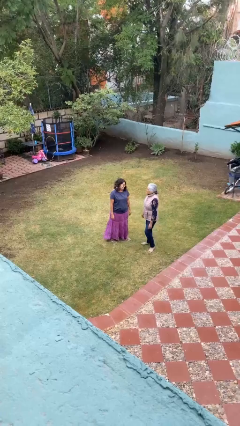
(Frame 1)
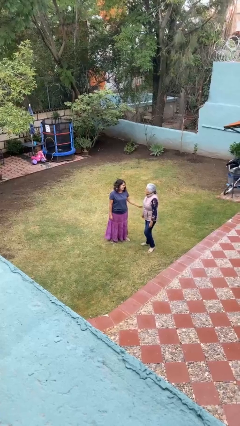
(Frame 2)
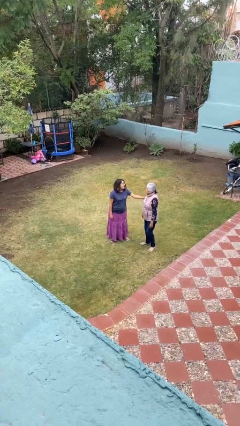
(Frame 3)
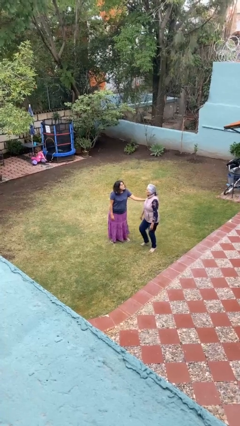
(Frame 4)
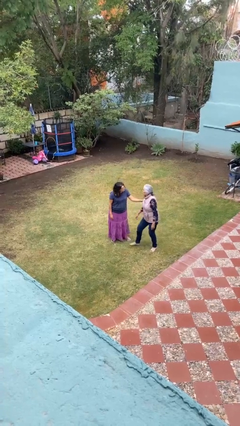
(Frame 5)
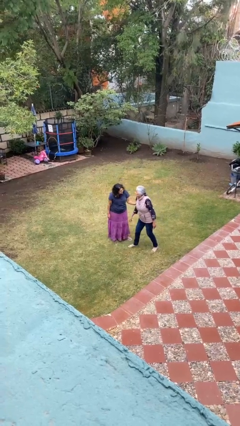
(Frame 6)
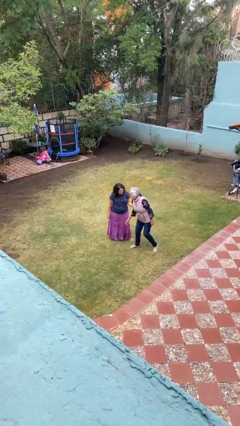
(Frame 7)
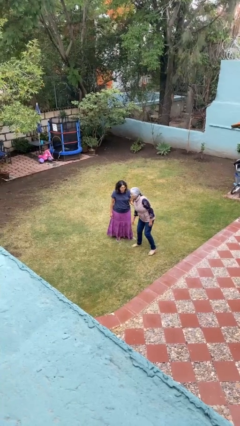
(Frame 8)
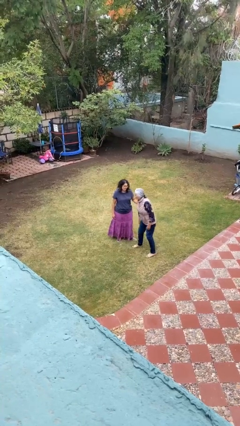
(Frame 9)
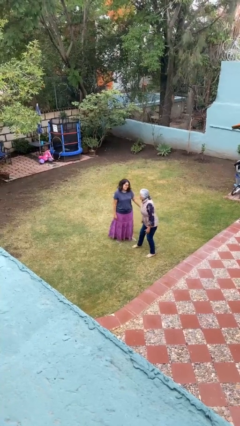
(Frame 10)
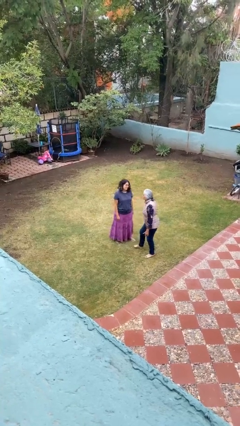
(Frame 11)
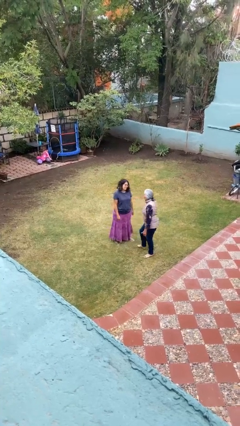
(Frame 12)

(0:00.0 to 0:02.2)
person grabs person by bicep

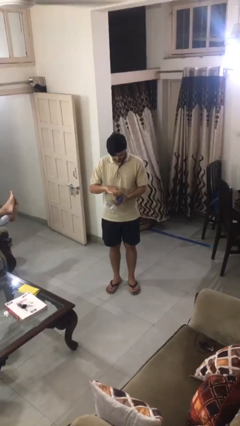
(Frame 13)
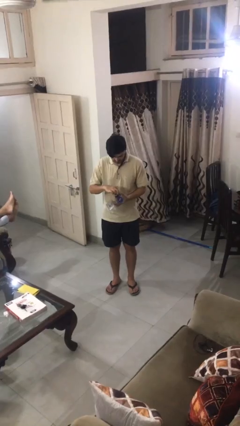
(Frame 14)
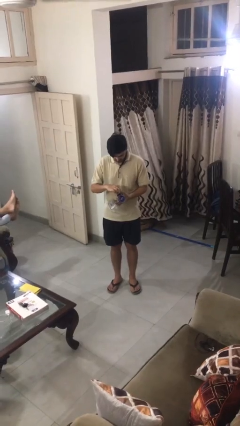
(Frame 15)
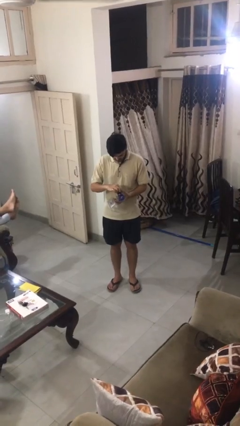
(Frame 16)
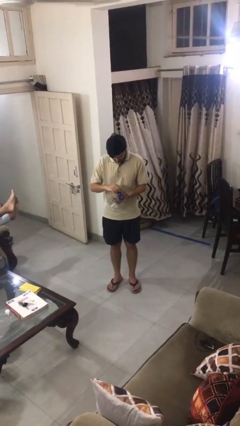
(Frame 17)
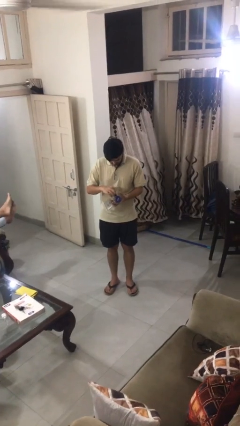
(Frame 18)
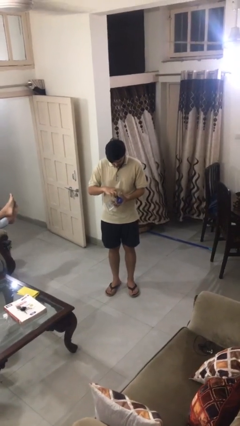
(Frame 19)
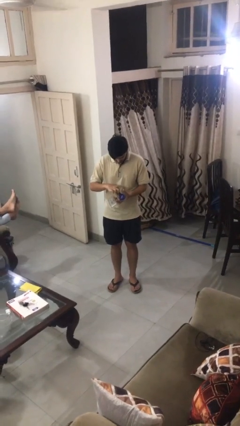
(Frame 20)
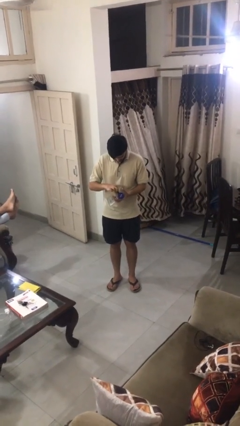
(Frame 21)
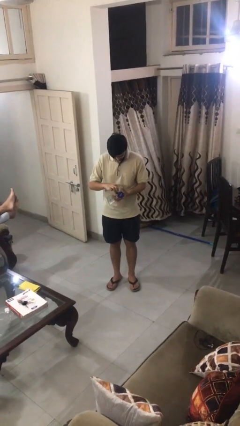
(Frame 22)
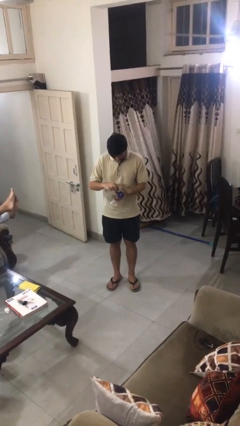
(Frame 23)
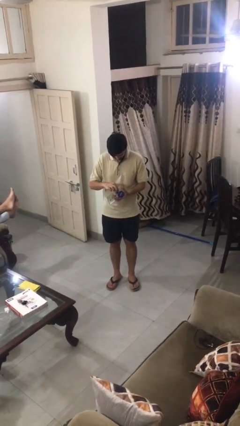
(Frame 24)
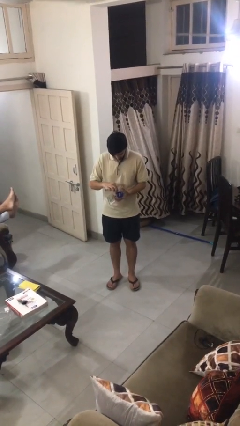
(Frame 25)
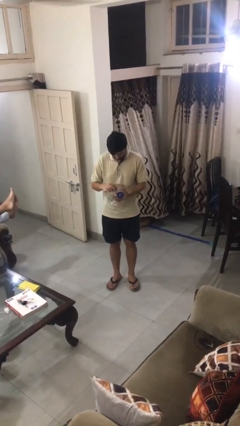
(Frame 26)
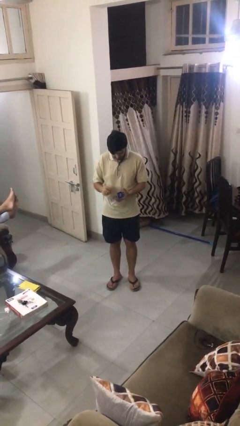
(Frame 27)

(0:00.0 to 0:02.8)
person searches jewelry box

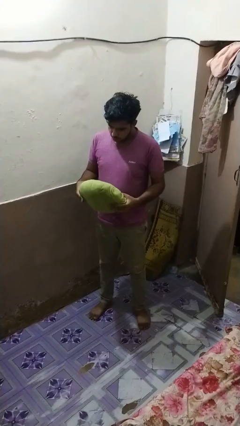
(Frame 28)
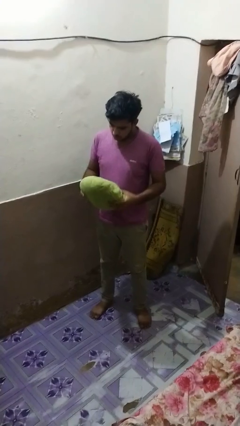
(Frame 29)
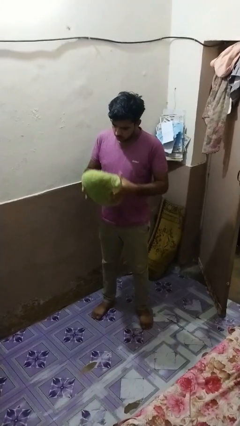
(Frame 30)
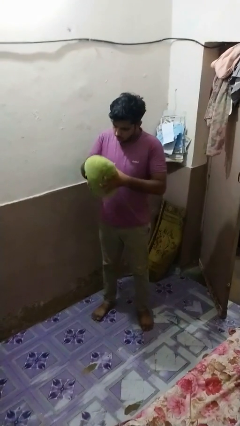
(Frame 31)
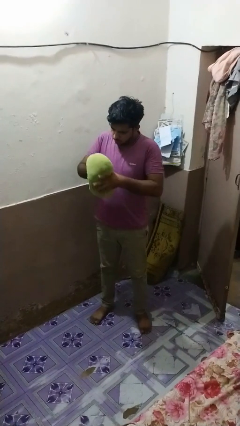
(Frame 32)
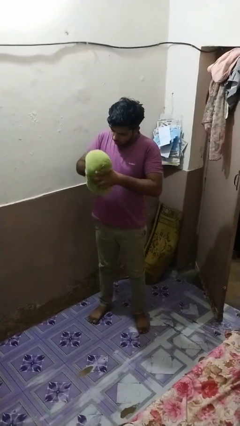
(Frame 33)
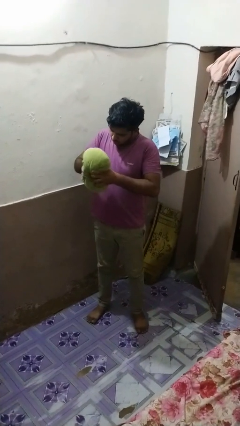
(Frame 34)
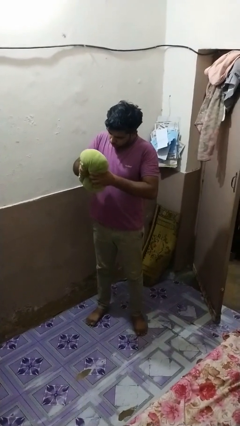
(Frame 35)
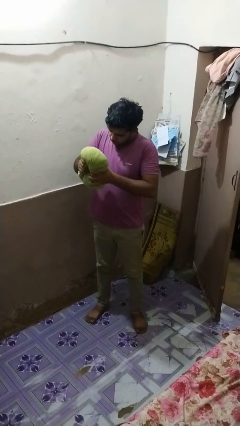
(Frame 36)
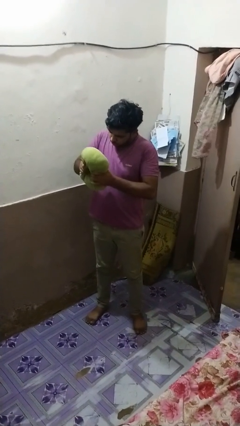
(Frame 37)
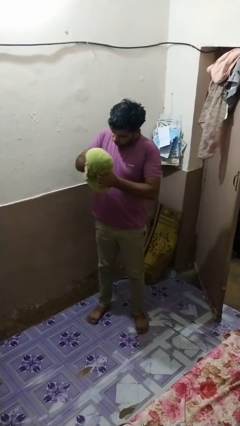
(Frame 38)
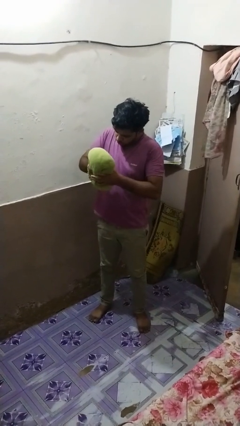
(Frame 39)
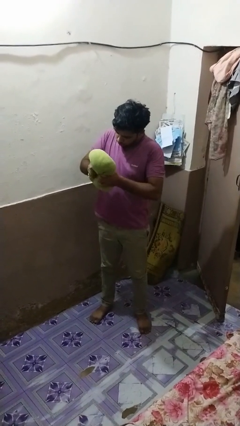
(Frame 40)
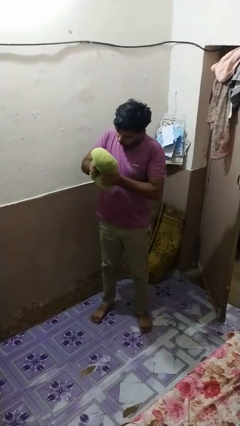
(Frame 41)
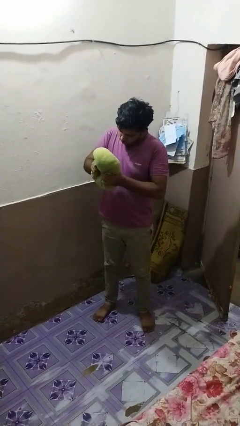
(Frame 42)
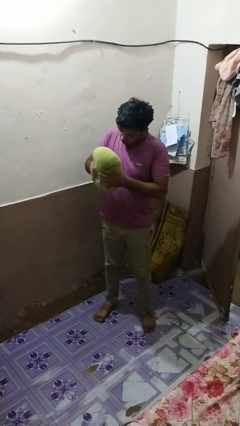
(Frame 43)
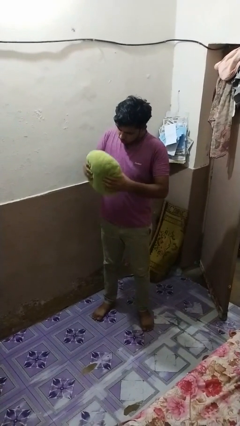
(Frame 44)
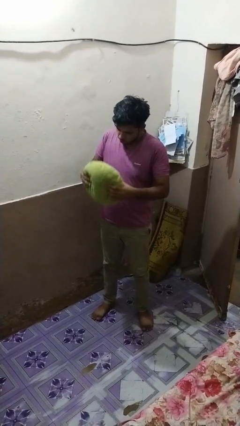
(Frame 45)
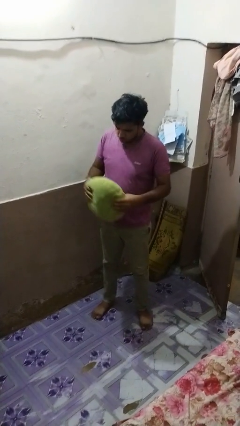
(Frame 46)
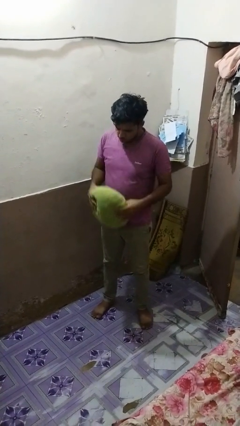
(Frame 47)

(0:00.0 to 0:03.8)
person squeezes object

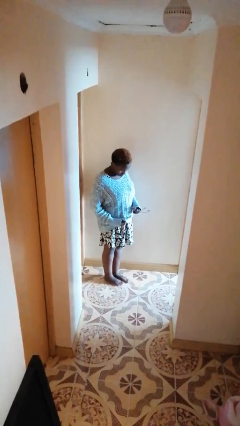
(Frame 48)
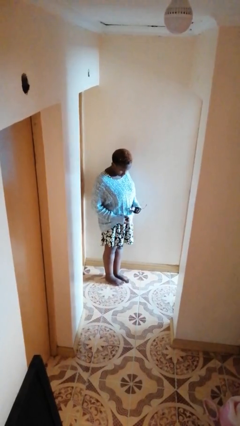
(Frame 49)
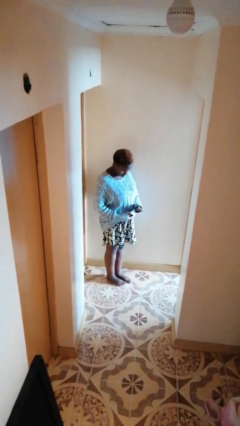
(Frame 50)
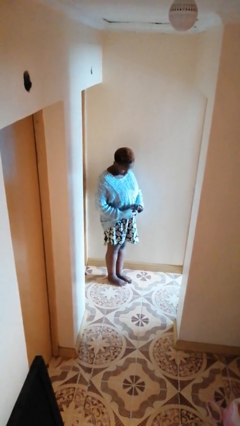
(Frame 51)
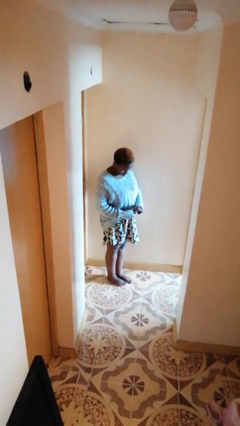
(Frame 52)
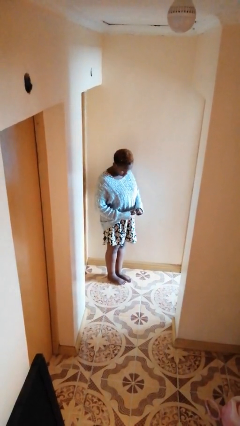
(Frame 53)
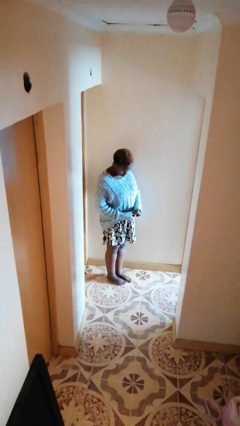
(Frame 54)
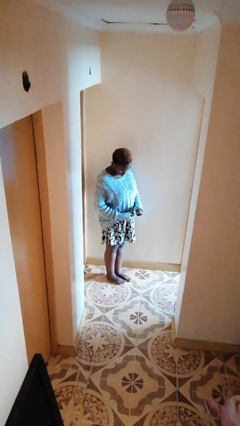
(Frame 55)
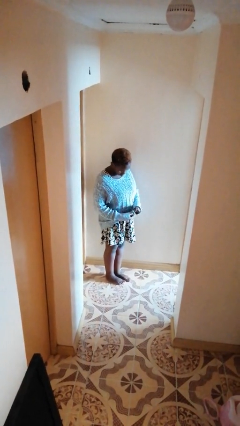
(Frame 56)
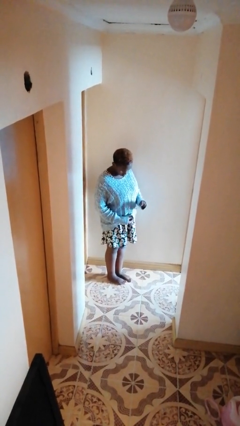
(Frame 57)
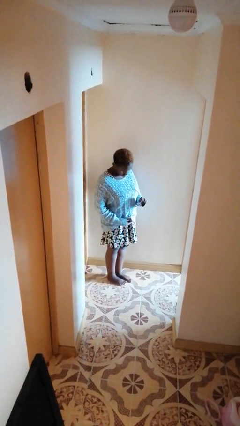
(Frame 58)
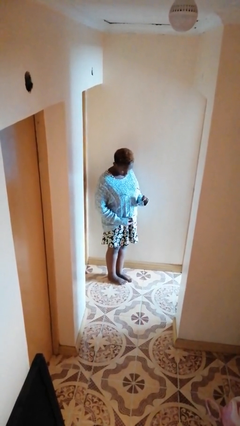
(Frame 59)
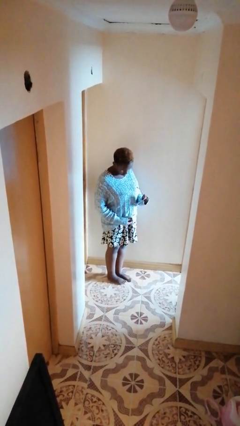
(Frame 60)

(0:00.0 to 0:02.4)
person cleans eyeglasses

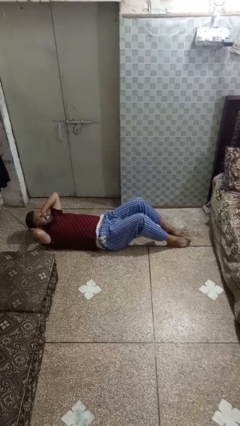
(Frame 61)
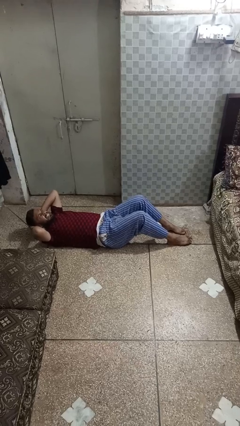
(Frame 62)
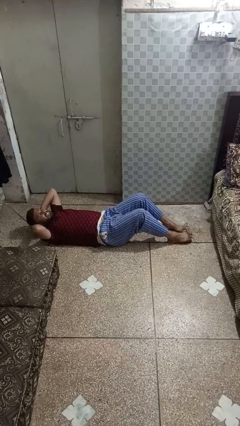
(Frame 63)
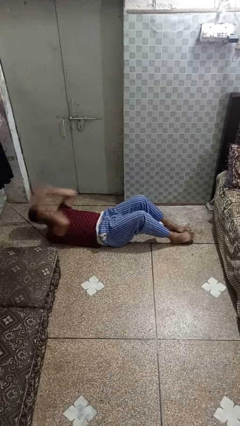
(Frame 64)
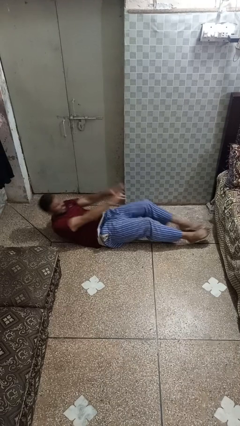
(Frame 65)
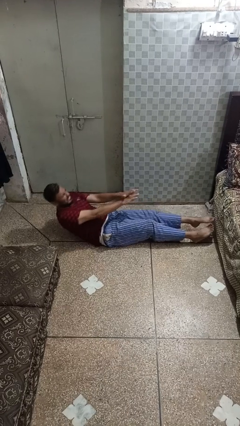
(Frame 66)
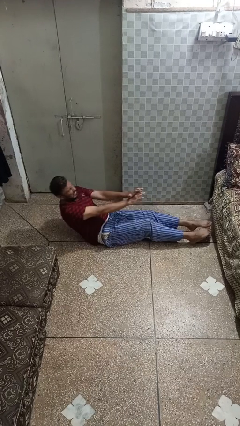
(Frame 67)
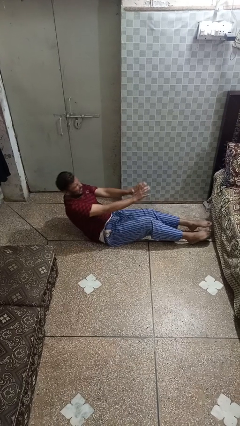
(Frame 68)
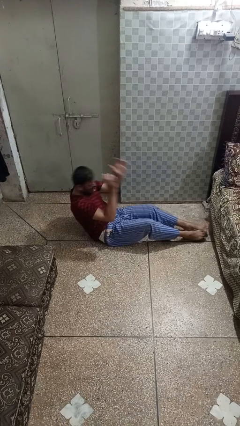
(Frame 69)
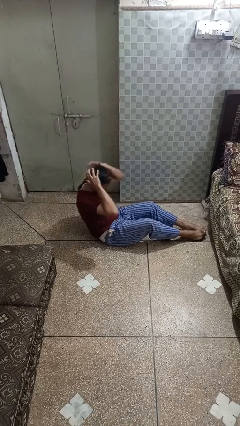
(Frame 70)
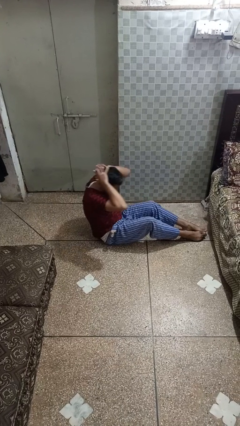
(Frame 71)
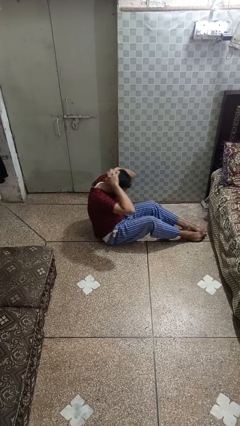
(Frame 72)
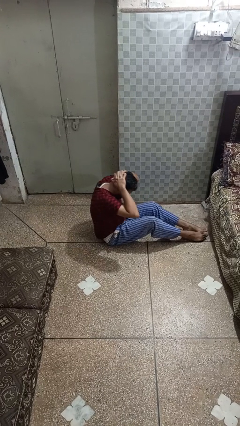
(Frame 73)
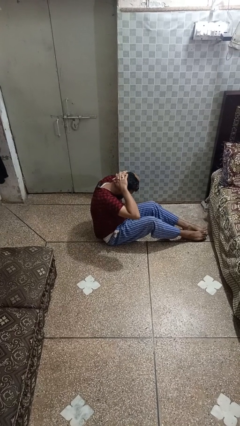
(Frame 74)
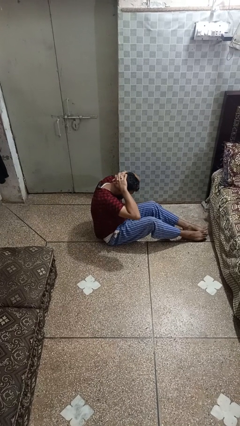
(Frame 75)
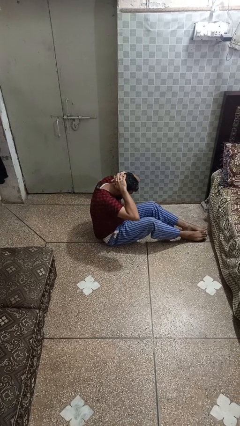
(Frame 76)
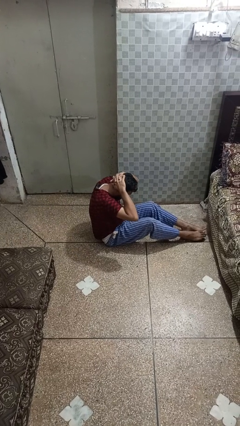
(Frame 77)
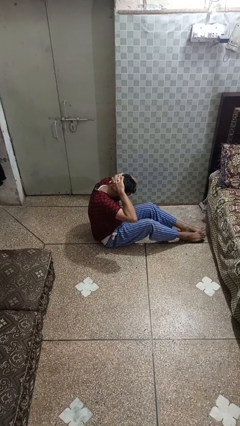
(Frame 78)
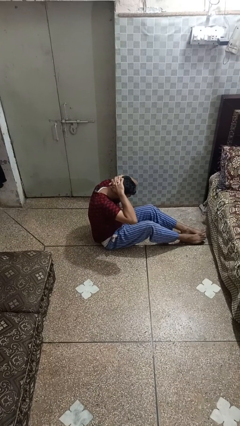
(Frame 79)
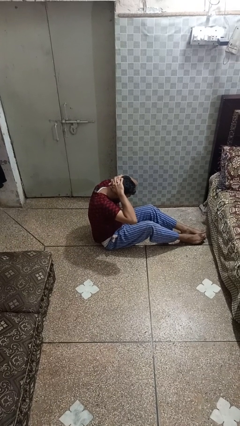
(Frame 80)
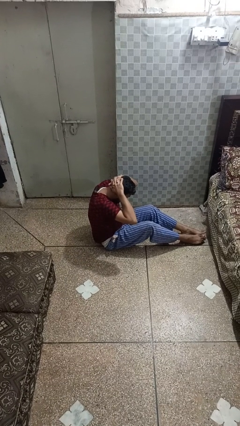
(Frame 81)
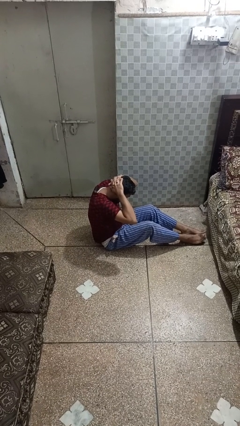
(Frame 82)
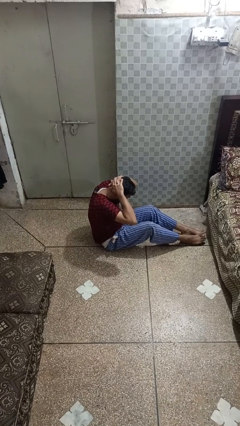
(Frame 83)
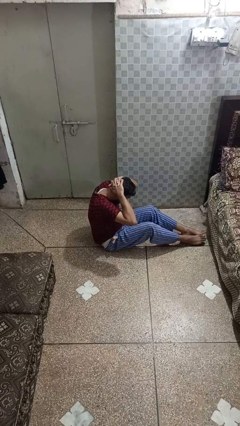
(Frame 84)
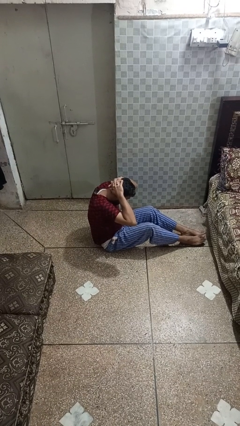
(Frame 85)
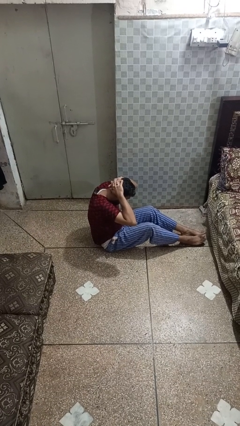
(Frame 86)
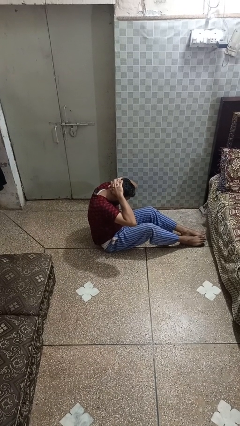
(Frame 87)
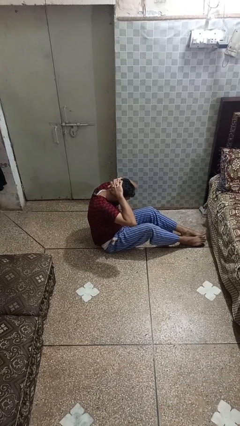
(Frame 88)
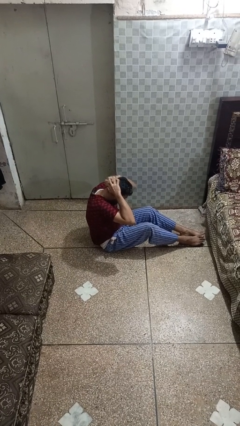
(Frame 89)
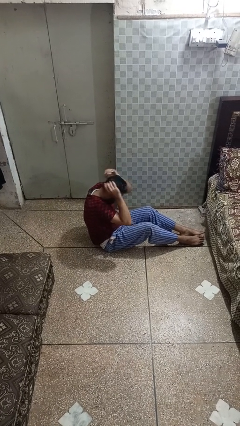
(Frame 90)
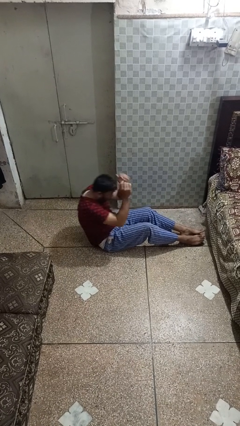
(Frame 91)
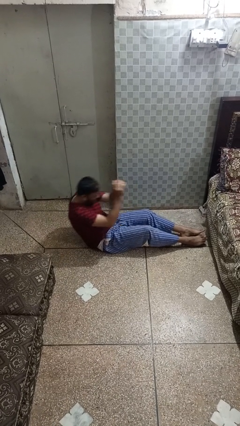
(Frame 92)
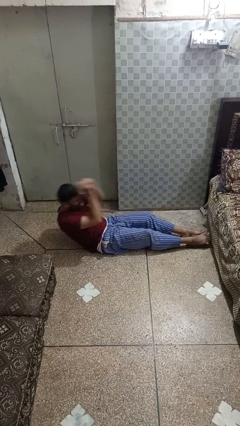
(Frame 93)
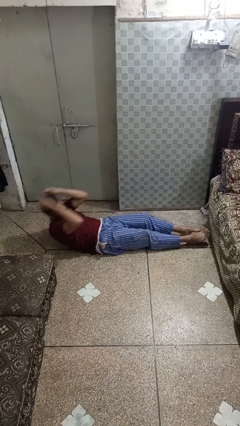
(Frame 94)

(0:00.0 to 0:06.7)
person exercises with situp
